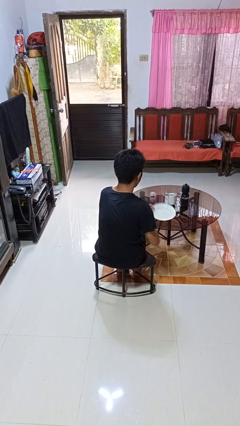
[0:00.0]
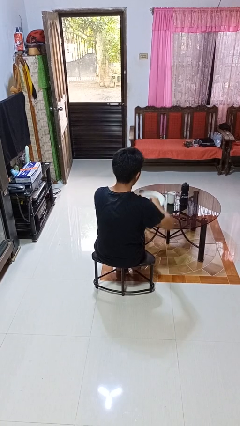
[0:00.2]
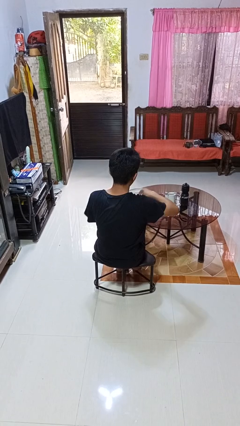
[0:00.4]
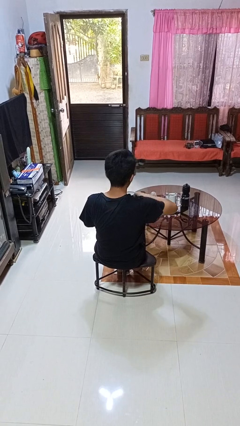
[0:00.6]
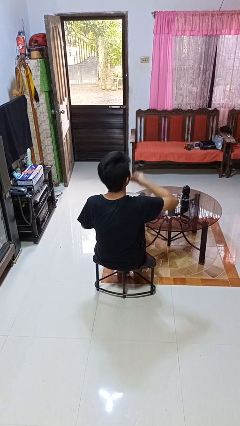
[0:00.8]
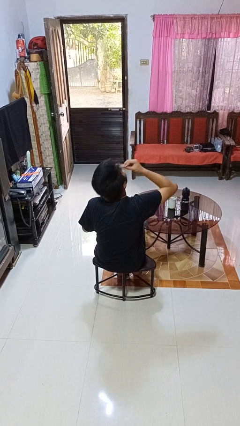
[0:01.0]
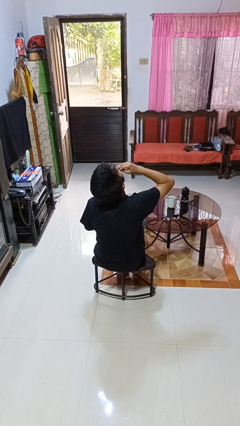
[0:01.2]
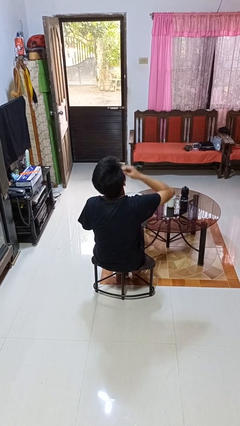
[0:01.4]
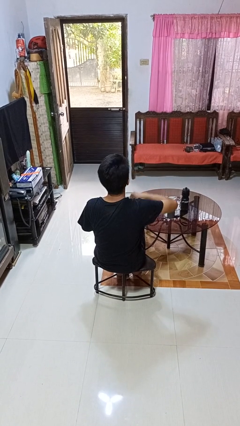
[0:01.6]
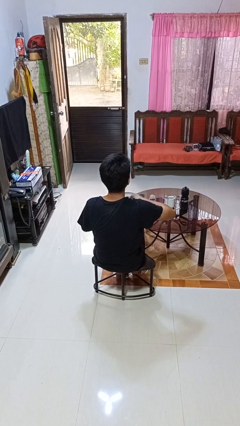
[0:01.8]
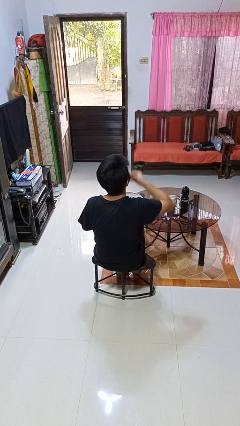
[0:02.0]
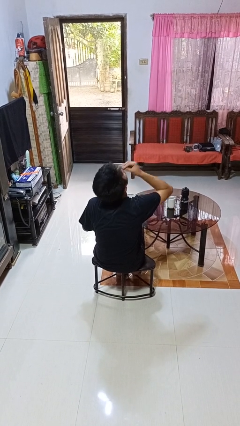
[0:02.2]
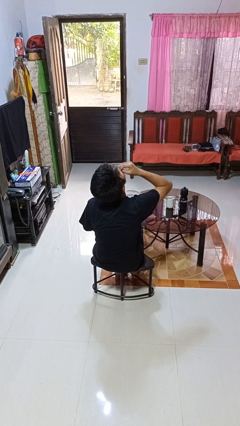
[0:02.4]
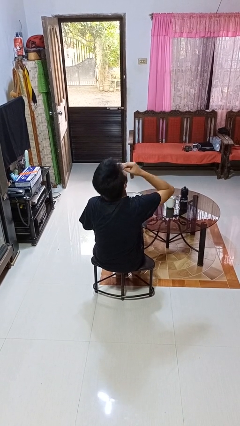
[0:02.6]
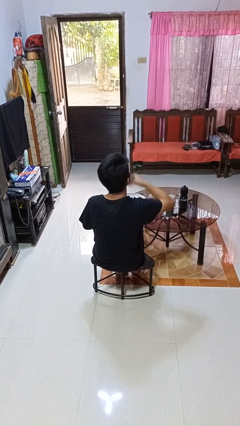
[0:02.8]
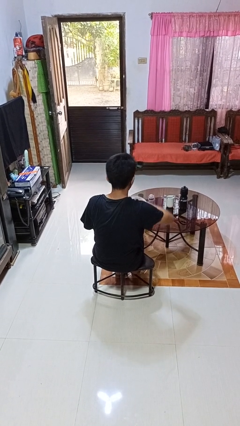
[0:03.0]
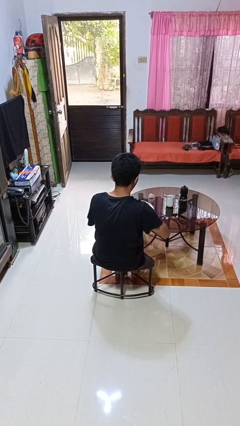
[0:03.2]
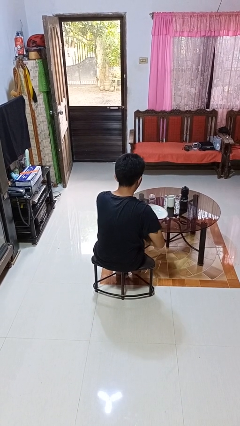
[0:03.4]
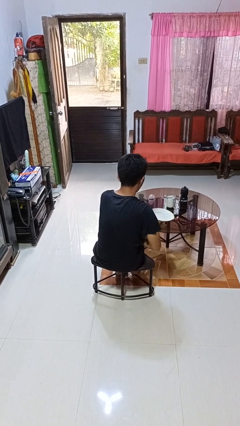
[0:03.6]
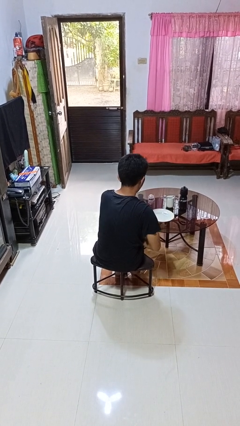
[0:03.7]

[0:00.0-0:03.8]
person eats with hands

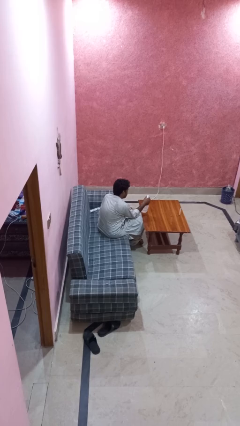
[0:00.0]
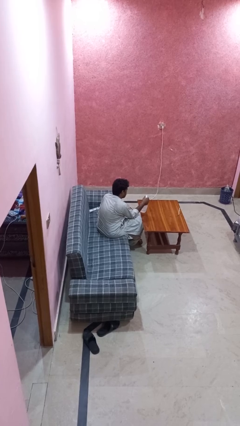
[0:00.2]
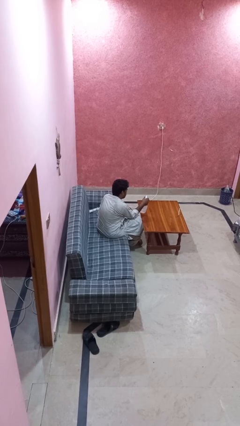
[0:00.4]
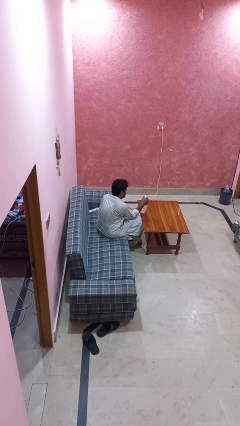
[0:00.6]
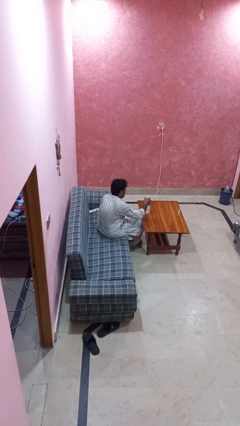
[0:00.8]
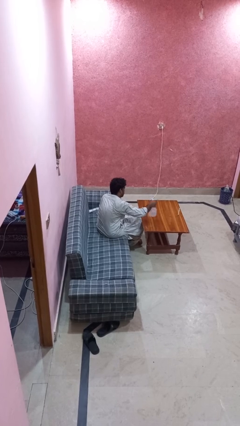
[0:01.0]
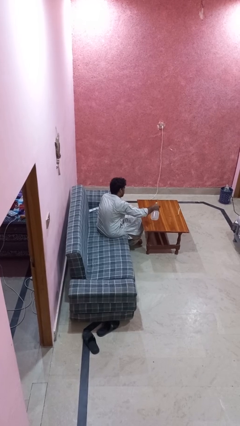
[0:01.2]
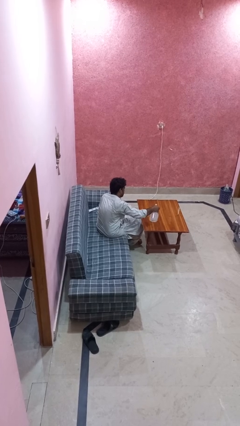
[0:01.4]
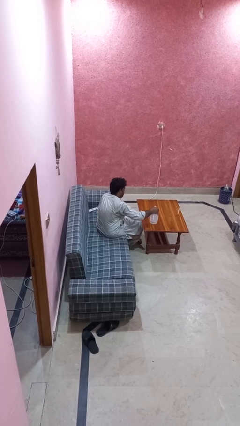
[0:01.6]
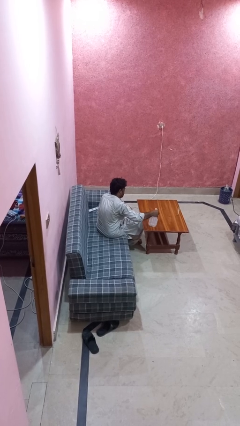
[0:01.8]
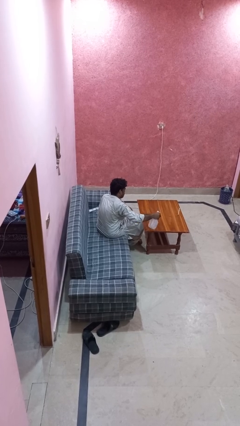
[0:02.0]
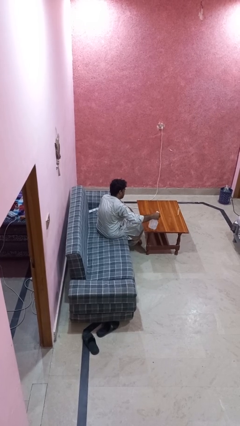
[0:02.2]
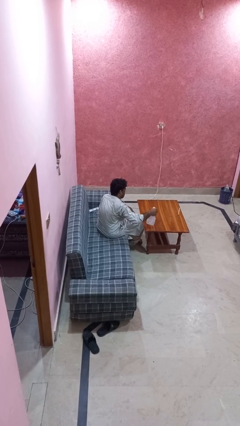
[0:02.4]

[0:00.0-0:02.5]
person sprays from bottle

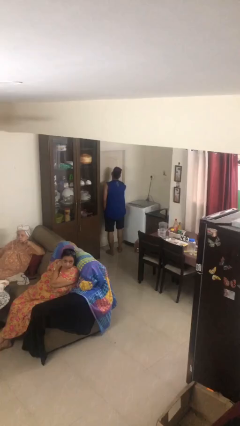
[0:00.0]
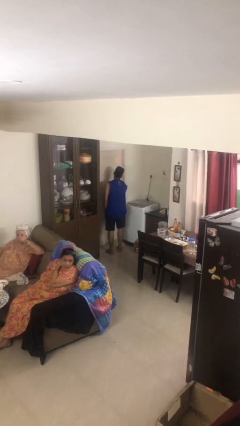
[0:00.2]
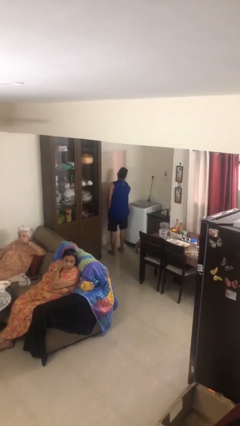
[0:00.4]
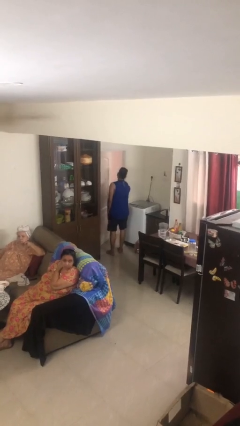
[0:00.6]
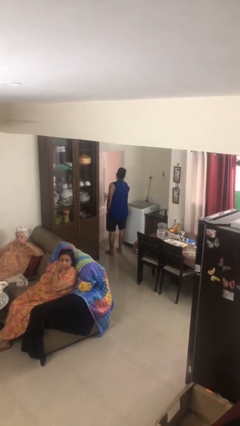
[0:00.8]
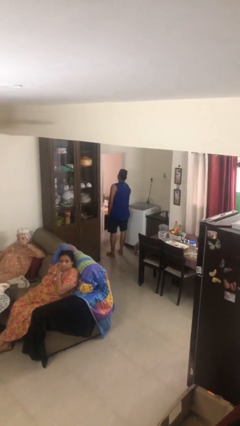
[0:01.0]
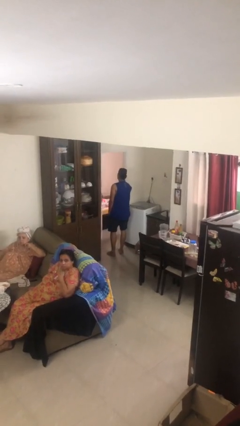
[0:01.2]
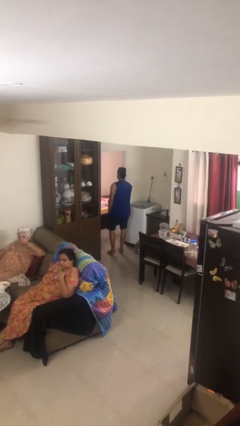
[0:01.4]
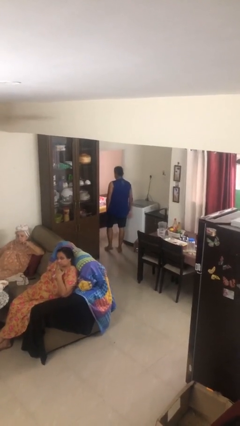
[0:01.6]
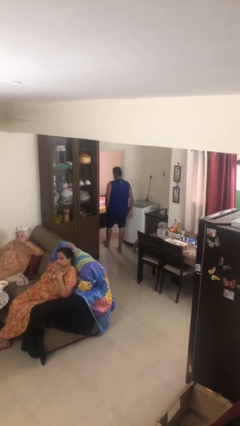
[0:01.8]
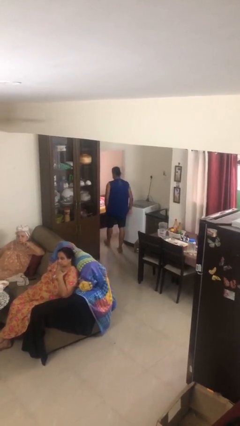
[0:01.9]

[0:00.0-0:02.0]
person opens facility door

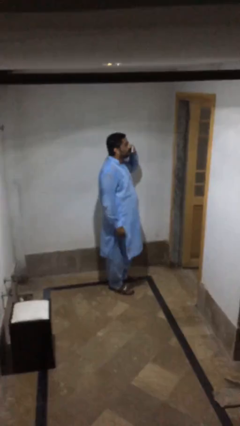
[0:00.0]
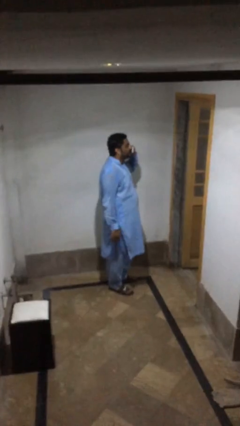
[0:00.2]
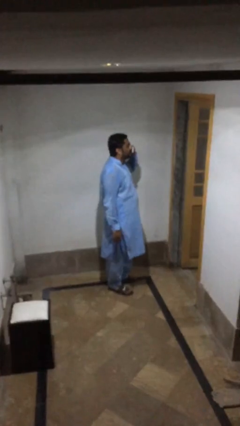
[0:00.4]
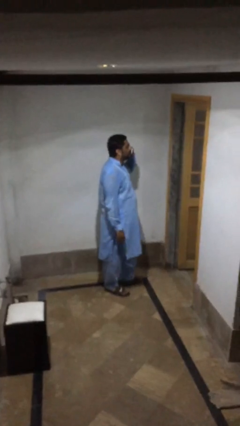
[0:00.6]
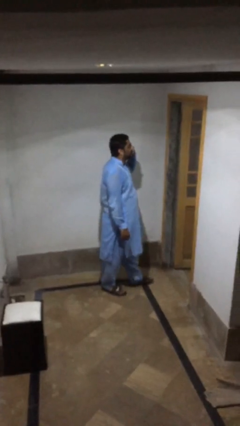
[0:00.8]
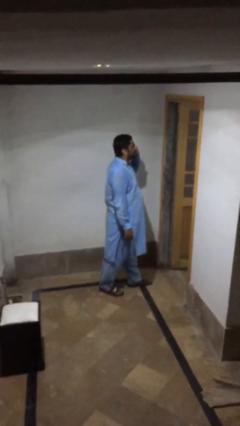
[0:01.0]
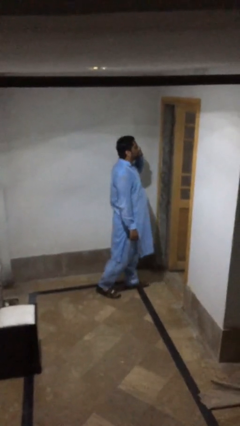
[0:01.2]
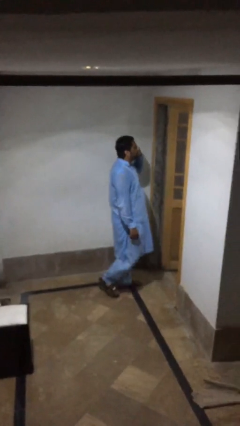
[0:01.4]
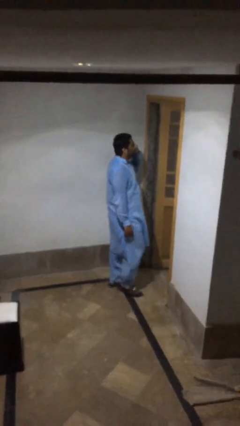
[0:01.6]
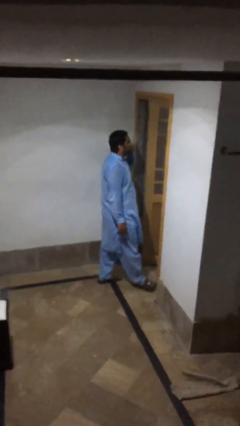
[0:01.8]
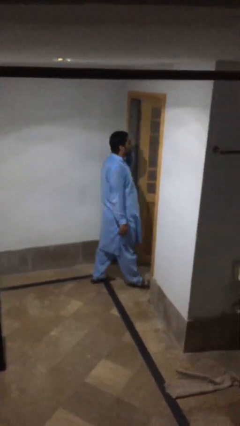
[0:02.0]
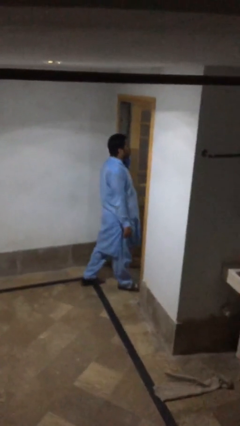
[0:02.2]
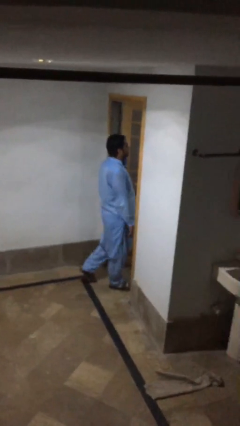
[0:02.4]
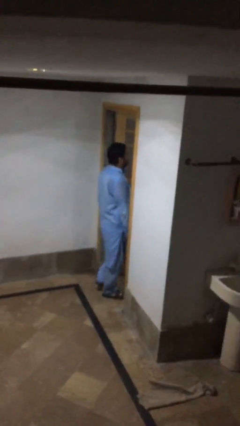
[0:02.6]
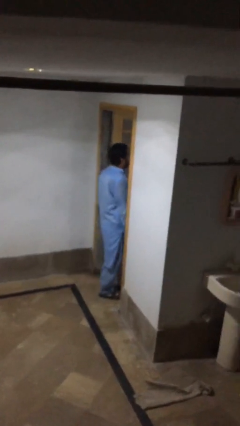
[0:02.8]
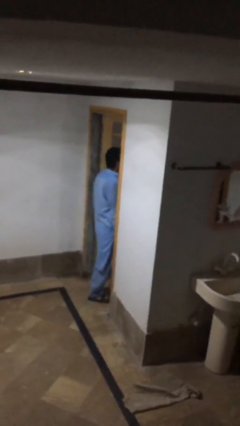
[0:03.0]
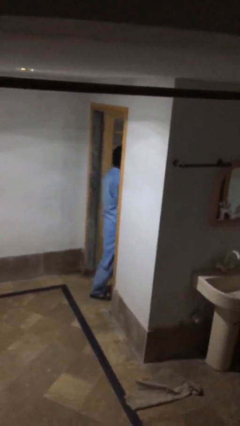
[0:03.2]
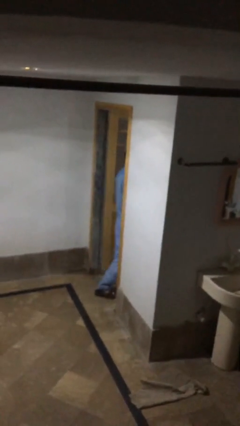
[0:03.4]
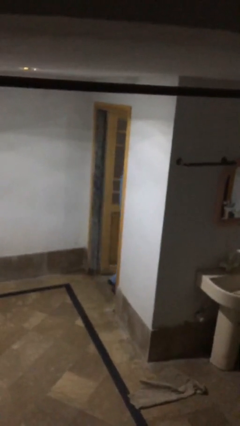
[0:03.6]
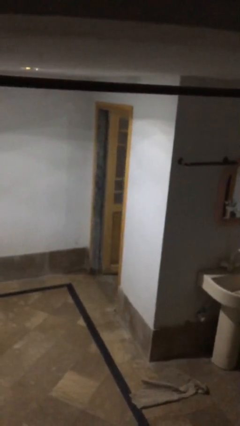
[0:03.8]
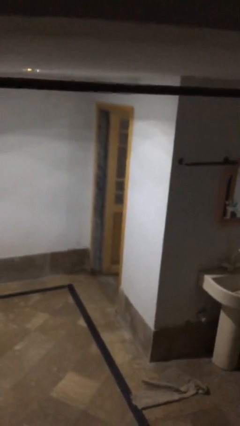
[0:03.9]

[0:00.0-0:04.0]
person exits scene through structure

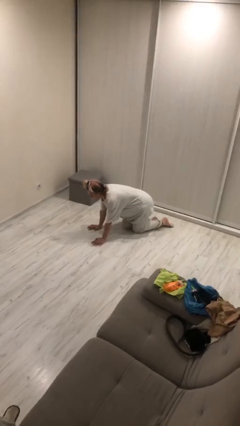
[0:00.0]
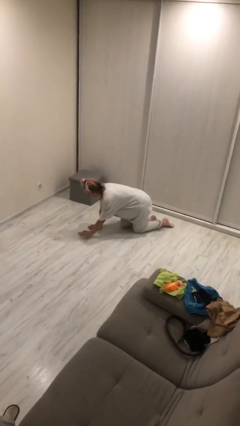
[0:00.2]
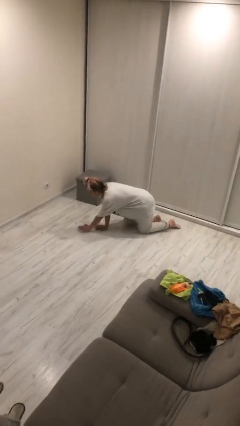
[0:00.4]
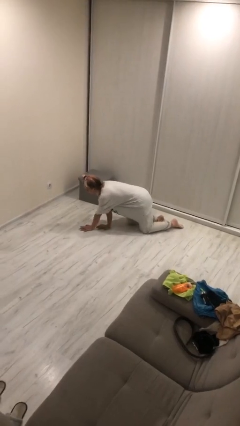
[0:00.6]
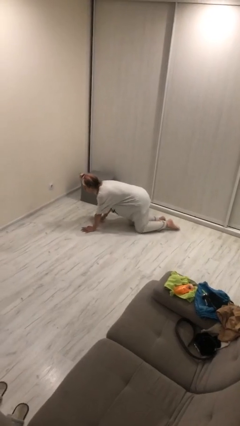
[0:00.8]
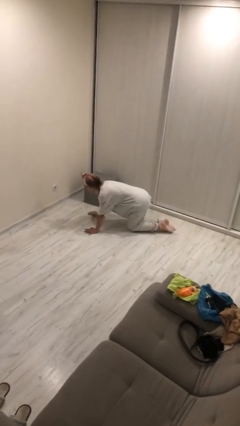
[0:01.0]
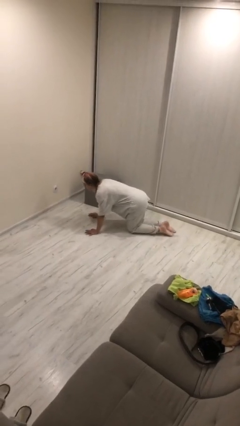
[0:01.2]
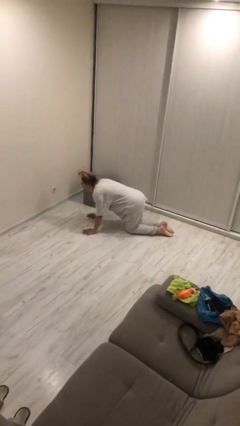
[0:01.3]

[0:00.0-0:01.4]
person crawls

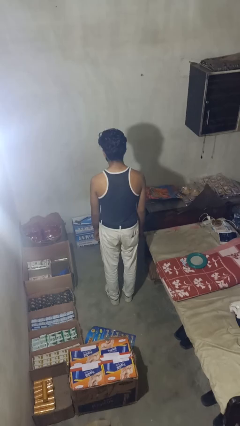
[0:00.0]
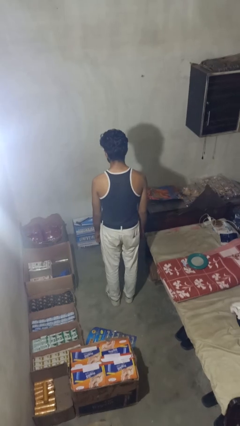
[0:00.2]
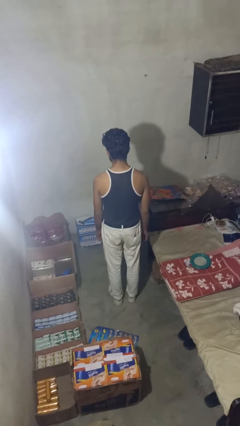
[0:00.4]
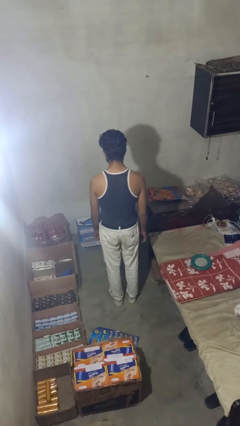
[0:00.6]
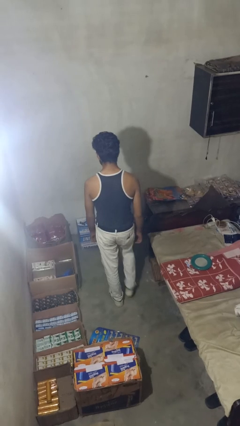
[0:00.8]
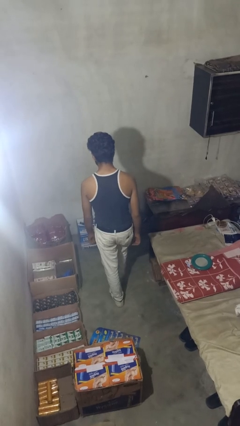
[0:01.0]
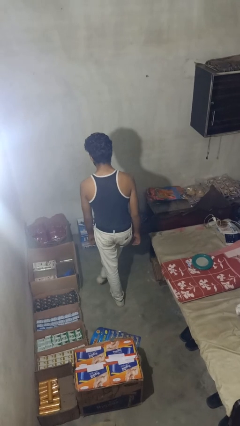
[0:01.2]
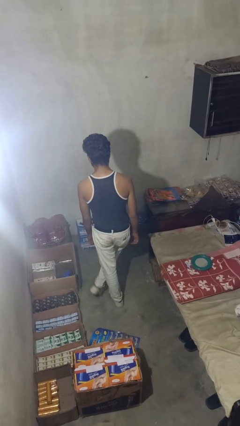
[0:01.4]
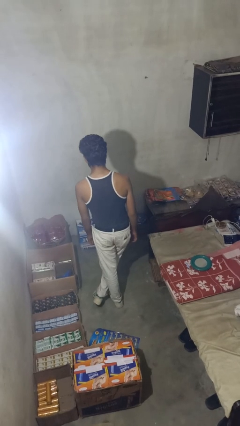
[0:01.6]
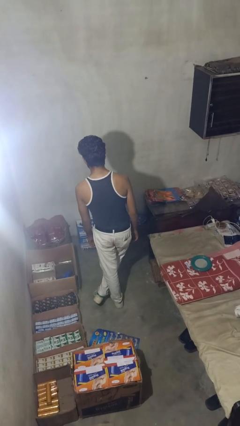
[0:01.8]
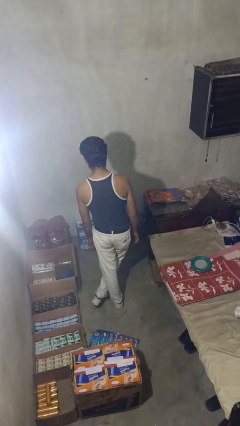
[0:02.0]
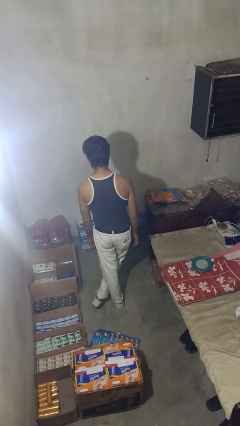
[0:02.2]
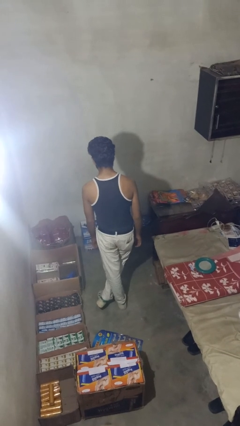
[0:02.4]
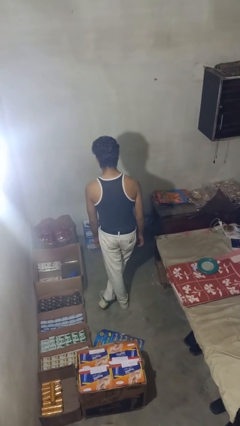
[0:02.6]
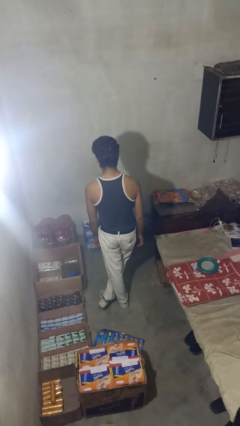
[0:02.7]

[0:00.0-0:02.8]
person crosses legs

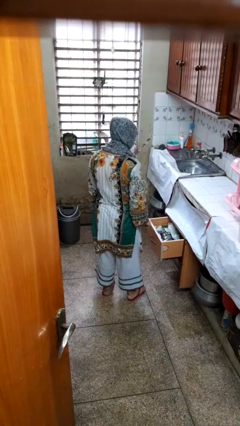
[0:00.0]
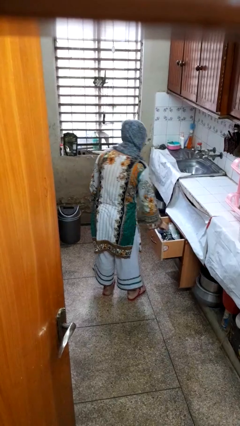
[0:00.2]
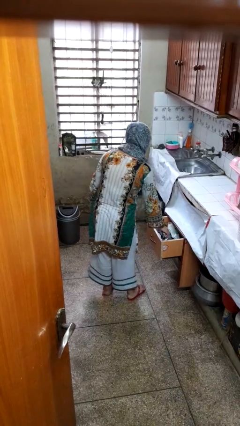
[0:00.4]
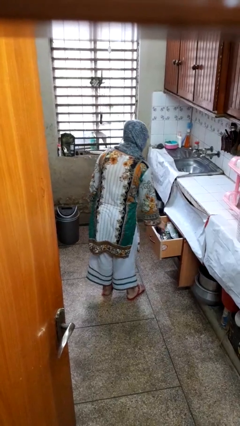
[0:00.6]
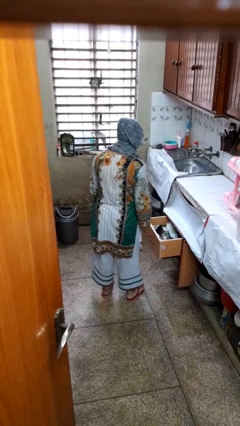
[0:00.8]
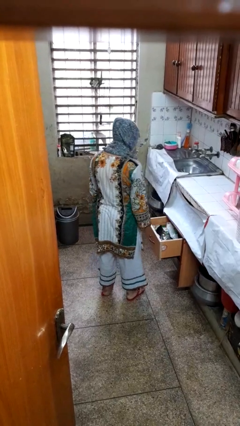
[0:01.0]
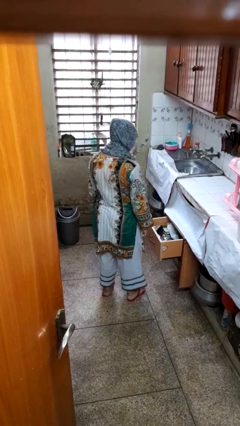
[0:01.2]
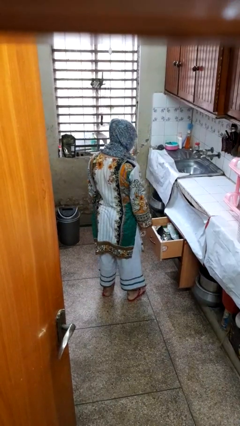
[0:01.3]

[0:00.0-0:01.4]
person puts object into kitchen drawer
